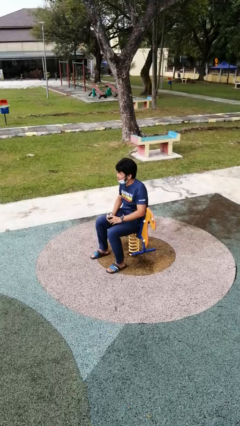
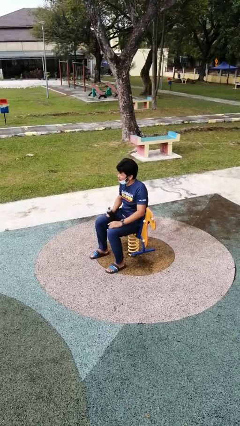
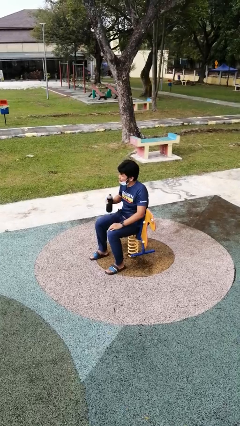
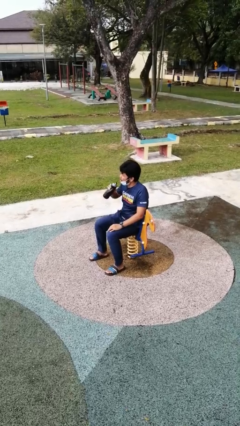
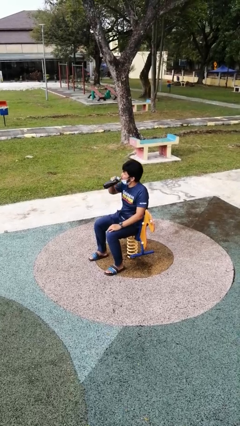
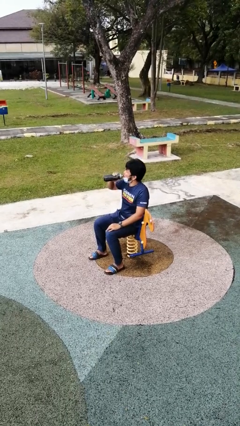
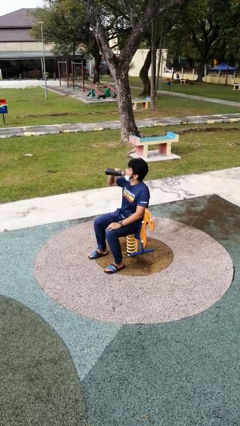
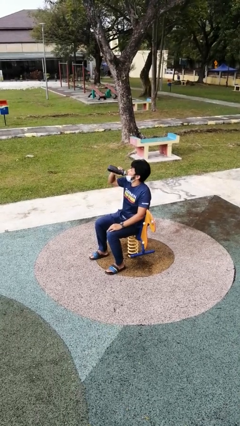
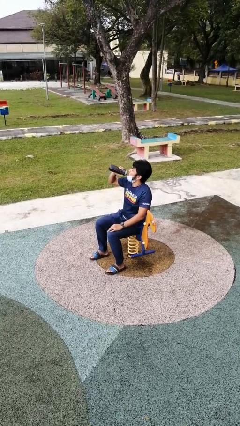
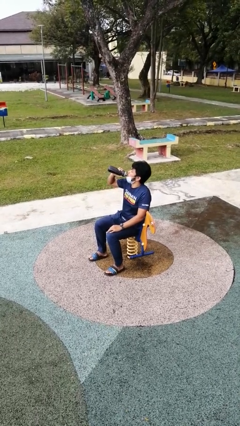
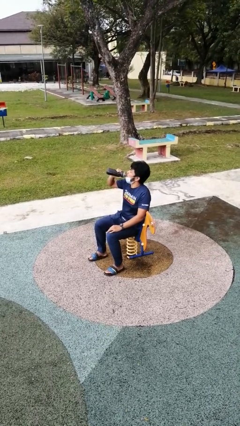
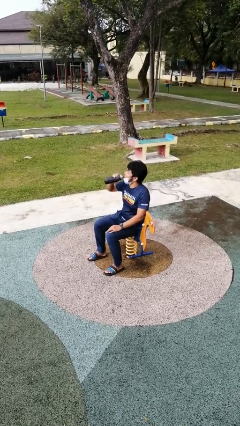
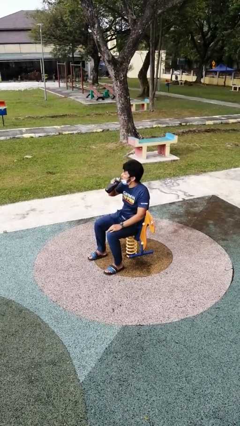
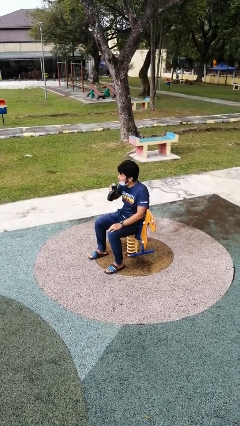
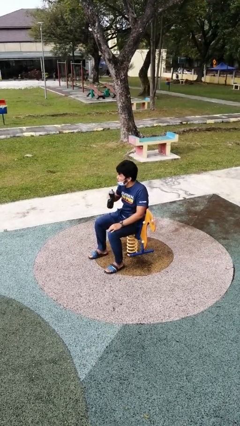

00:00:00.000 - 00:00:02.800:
person drinks from bottle

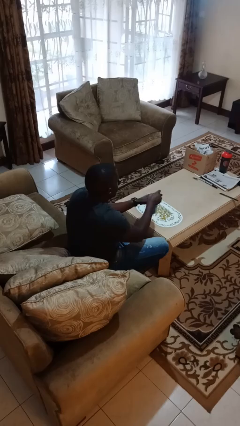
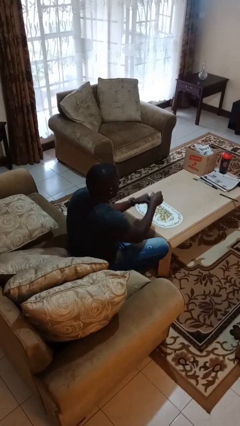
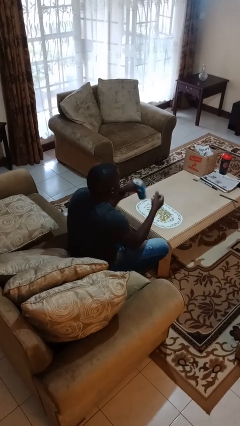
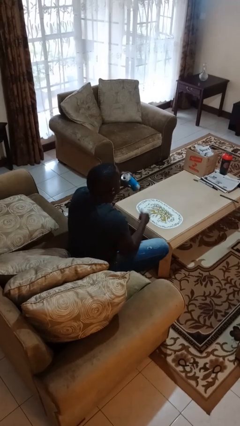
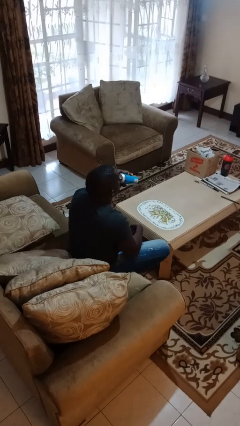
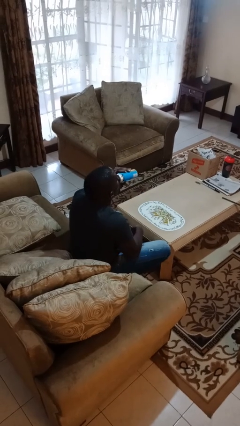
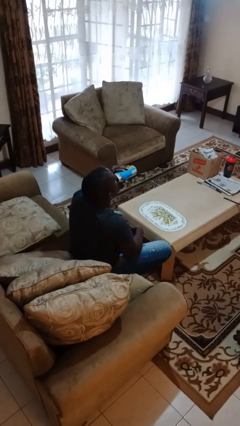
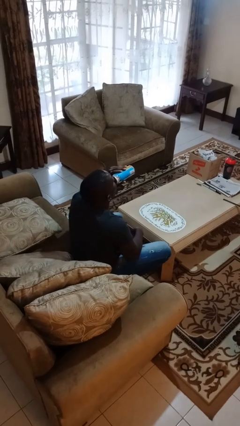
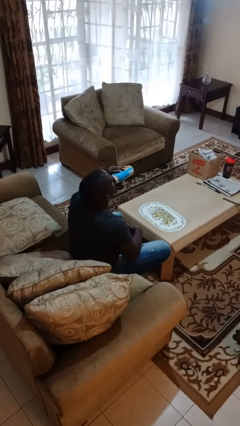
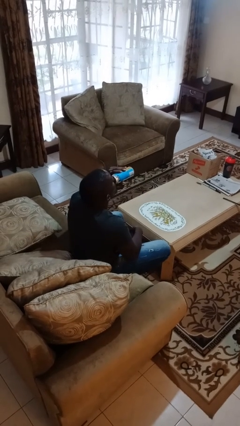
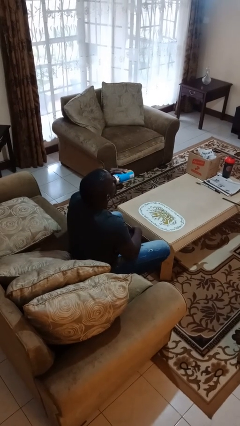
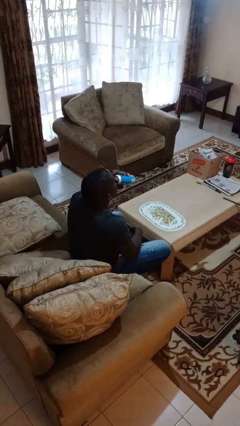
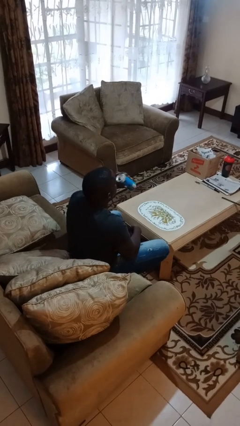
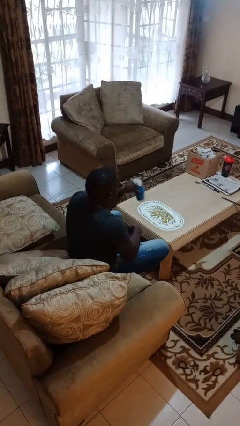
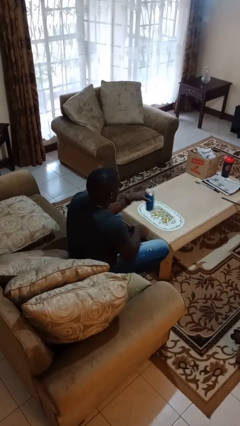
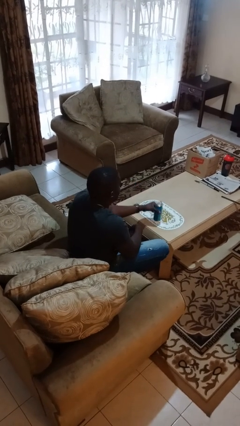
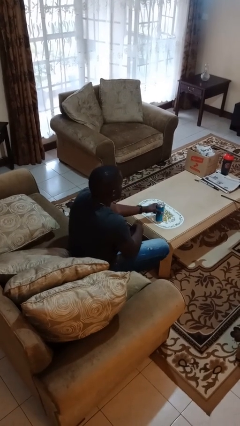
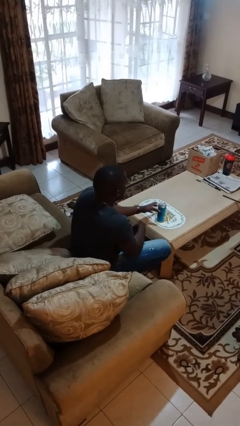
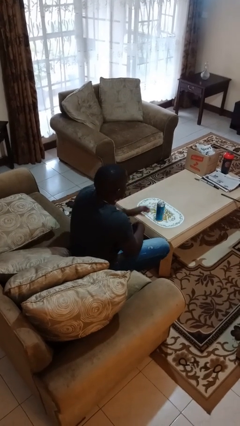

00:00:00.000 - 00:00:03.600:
person drinks from beverage can

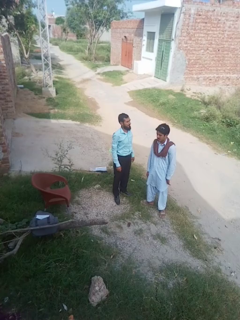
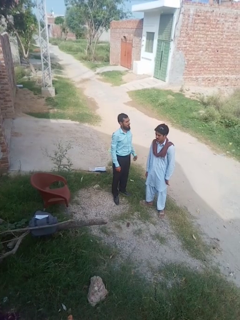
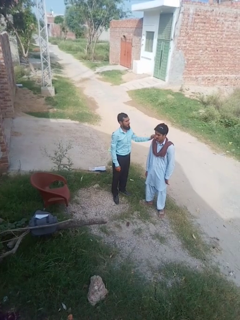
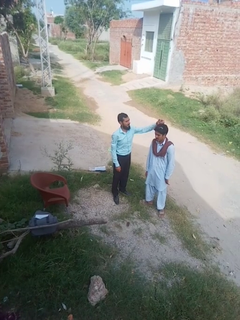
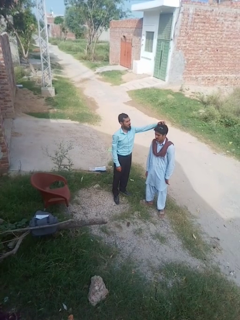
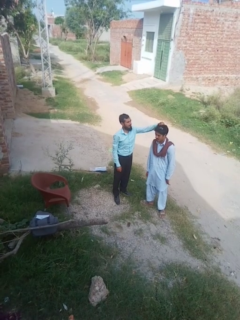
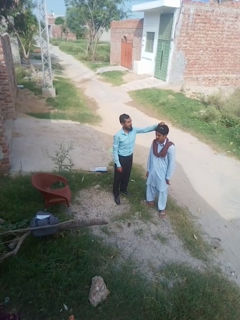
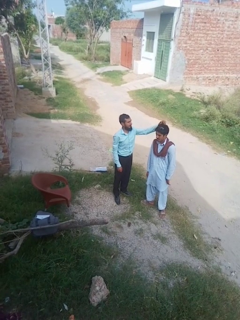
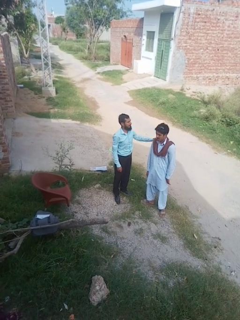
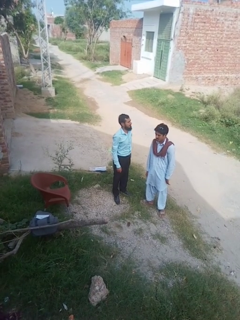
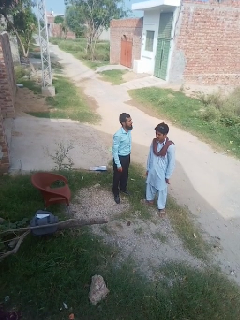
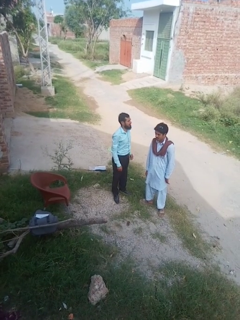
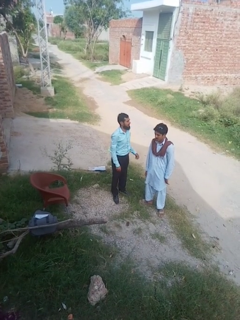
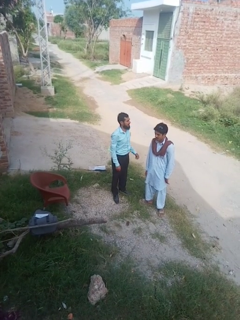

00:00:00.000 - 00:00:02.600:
person grabs person by hair

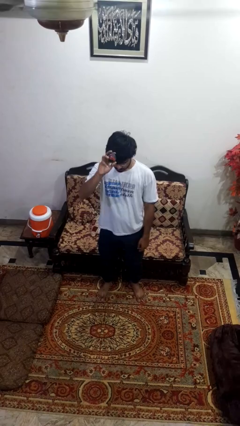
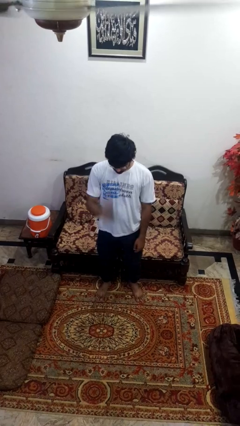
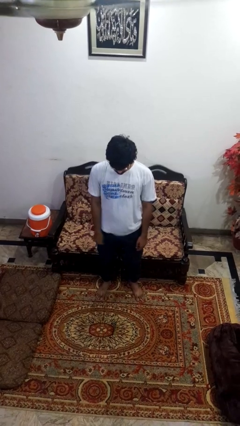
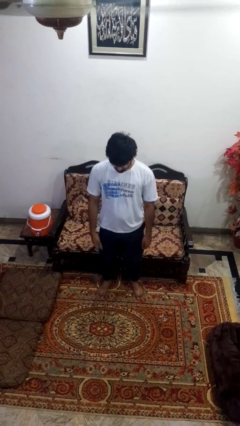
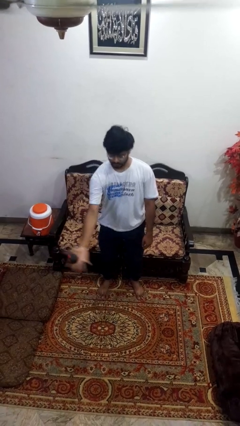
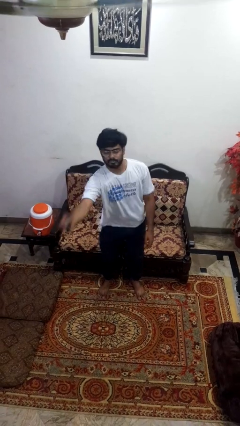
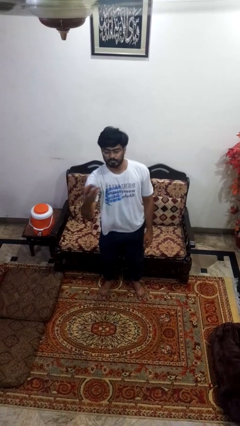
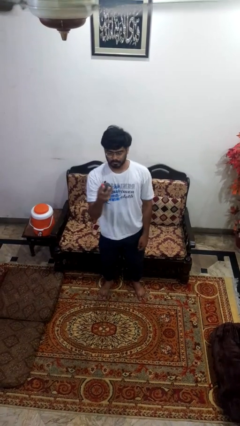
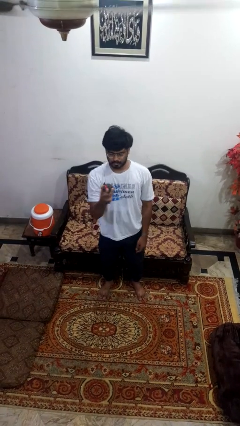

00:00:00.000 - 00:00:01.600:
person bounces ball on floor

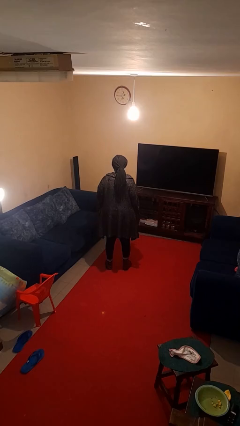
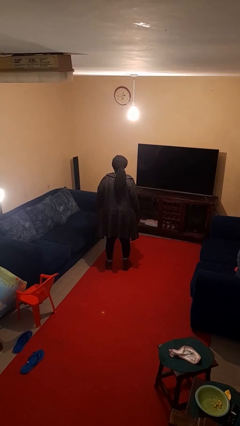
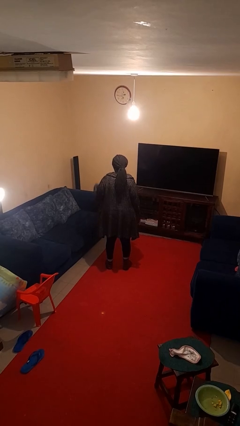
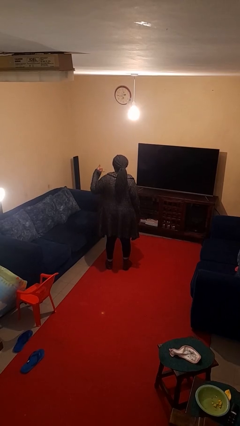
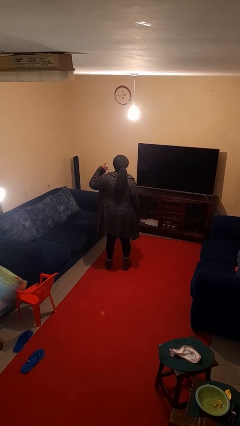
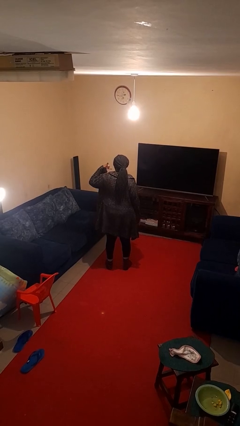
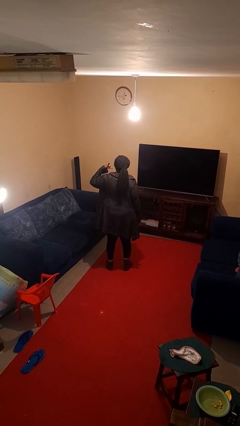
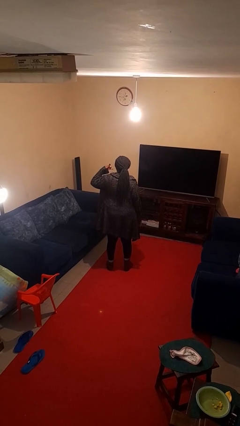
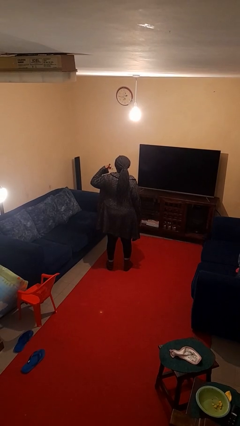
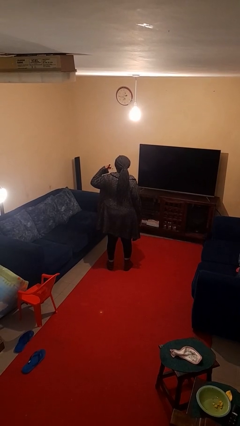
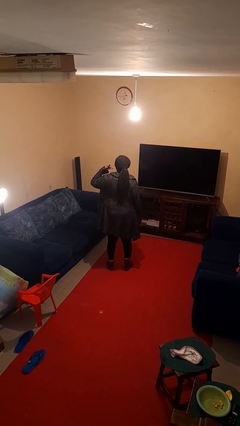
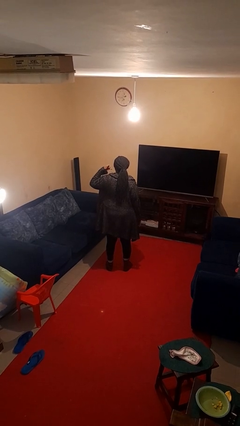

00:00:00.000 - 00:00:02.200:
person gestures call me

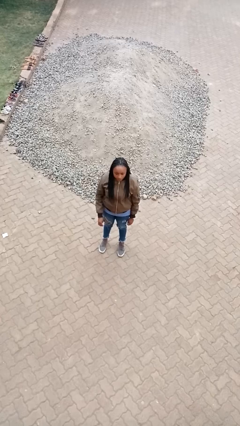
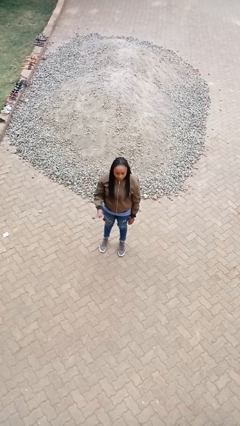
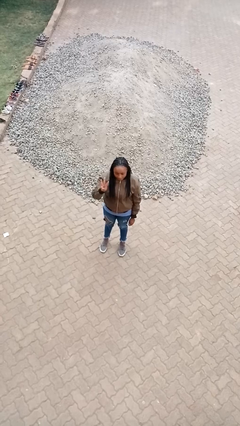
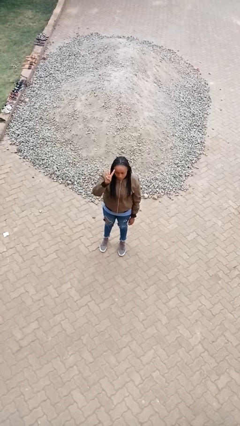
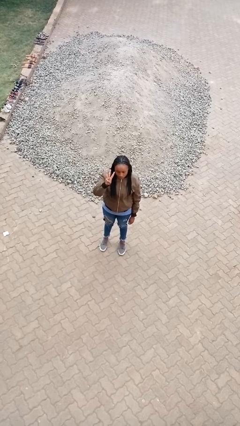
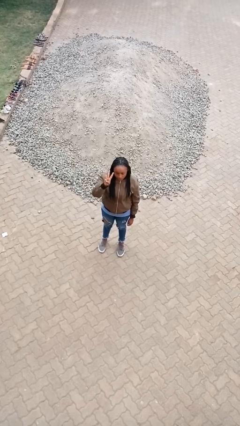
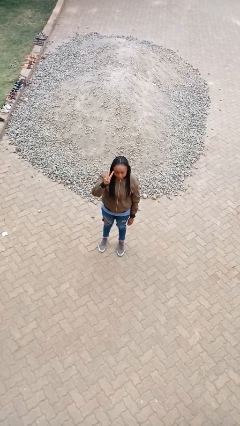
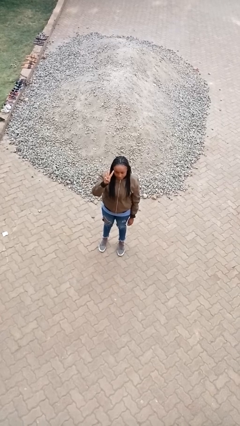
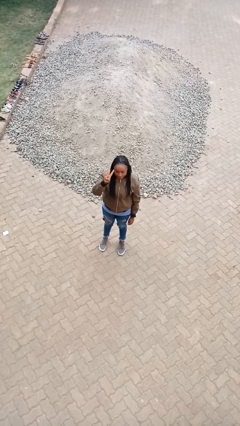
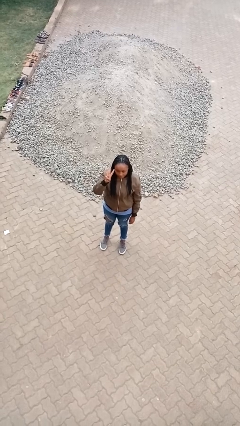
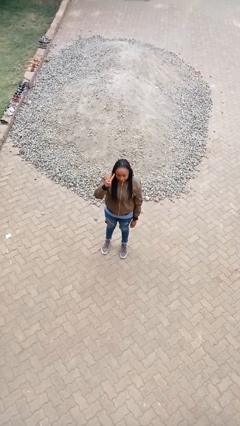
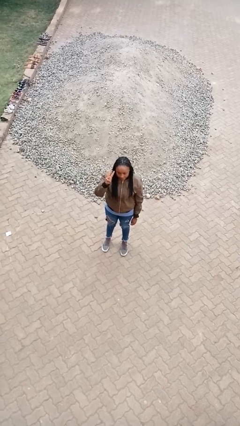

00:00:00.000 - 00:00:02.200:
person gestures number three

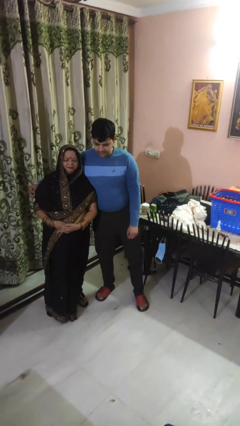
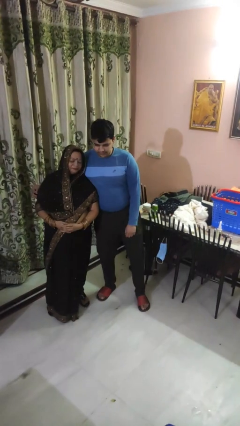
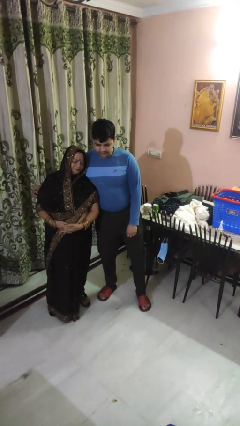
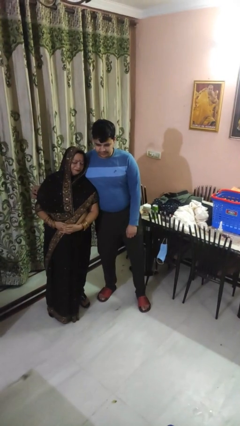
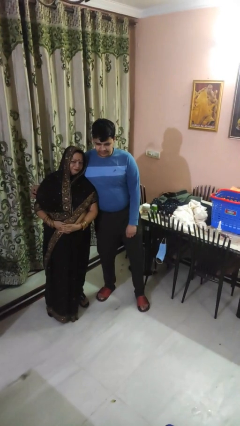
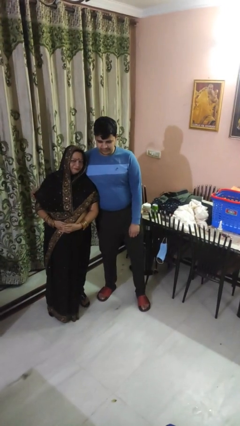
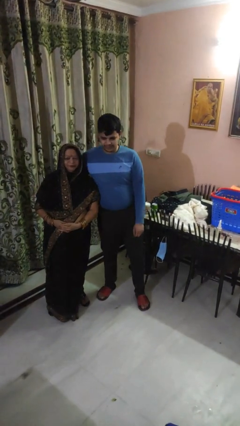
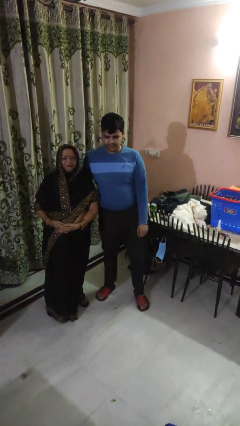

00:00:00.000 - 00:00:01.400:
person hugs person from side

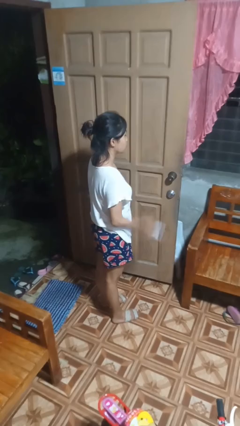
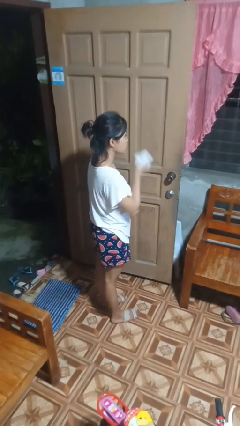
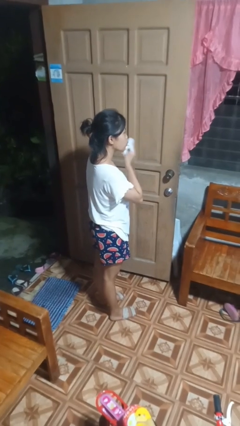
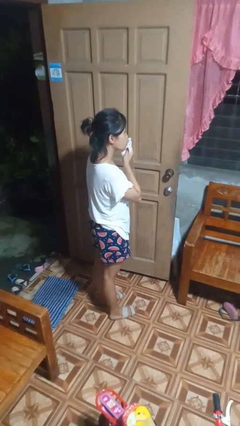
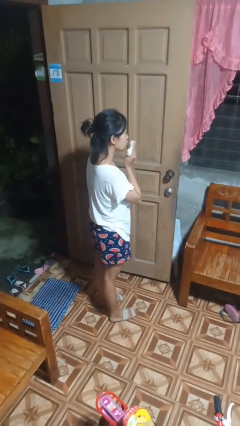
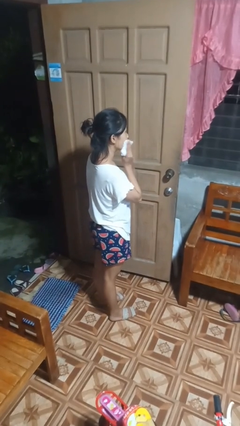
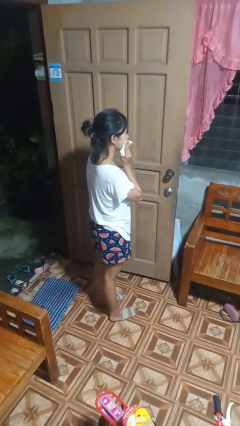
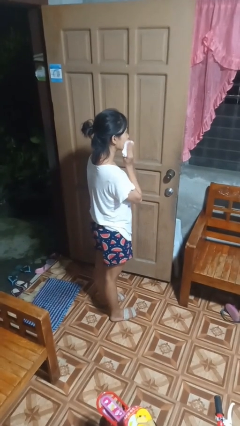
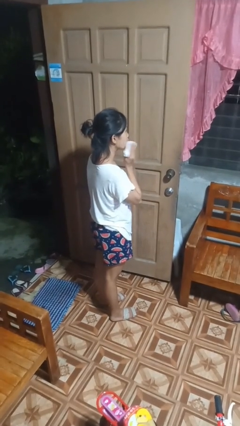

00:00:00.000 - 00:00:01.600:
person wipes mouth with napkin
